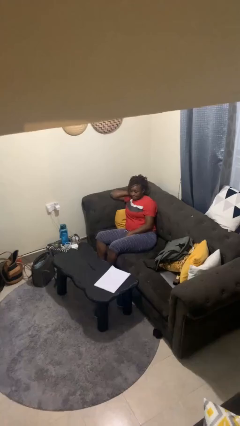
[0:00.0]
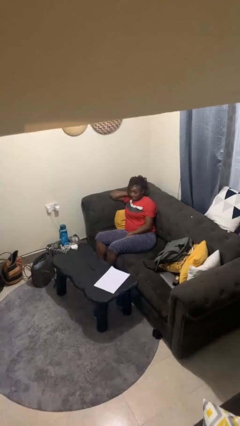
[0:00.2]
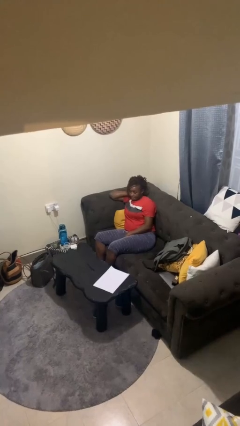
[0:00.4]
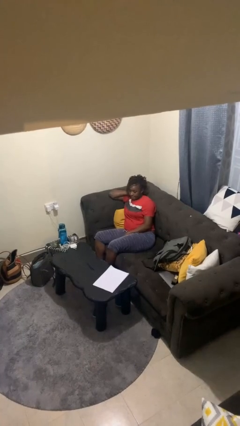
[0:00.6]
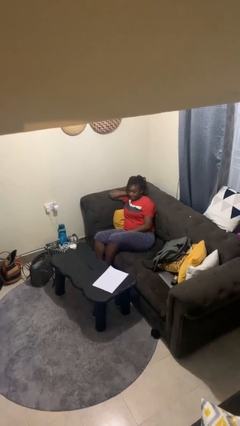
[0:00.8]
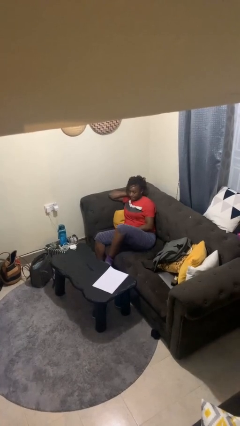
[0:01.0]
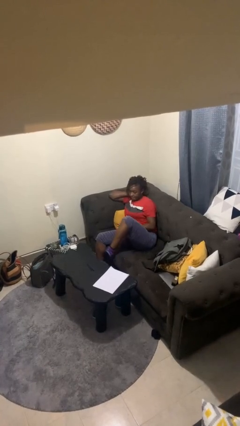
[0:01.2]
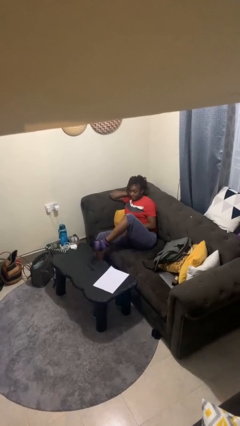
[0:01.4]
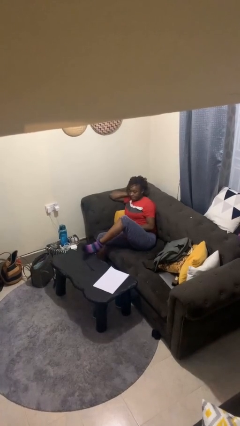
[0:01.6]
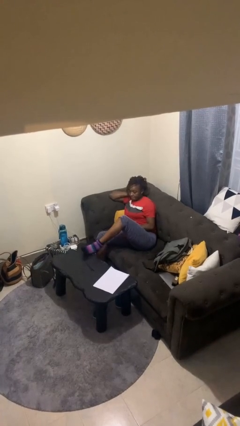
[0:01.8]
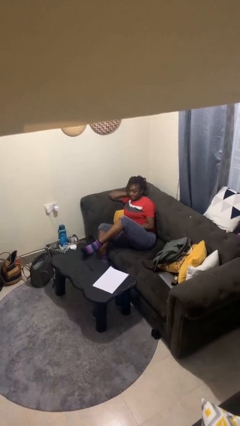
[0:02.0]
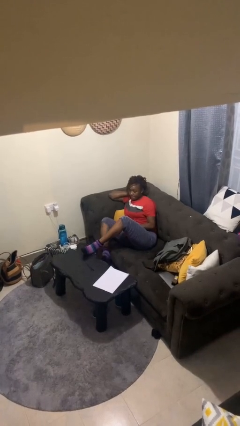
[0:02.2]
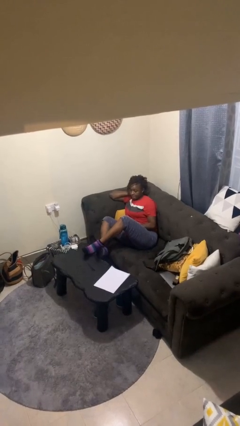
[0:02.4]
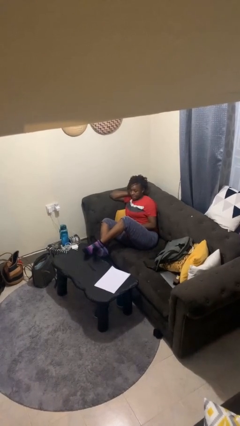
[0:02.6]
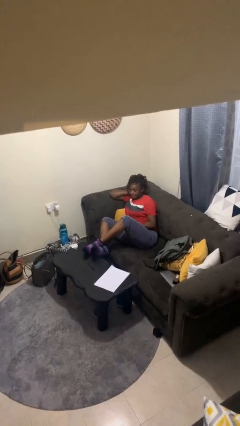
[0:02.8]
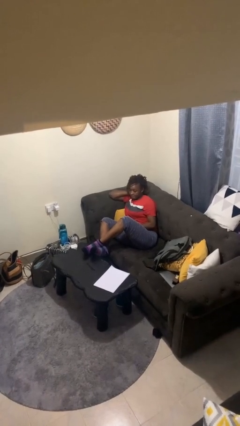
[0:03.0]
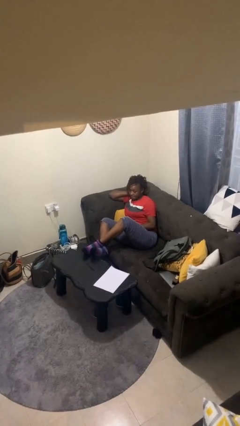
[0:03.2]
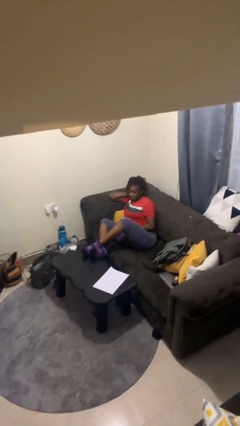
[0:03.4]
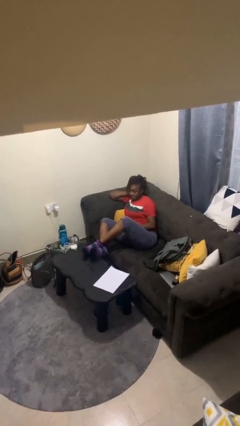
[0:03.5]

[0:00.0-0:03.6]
person puts feet up

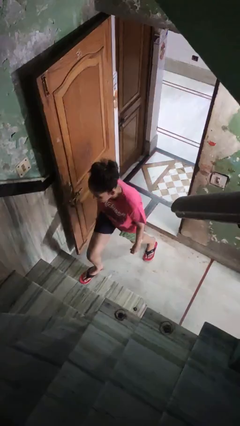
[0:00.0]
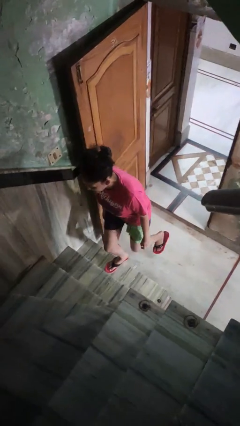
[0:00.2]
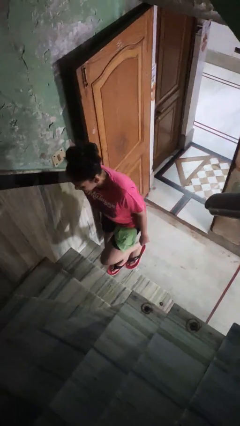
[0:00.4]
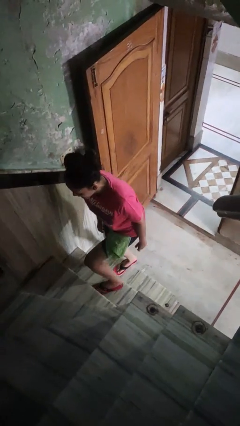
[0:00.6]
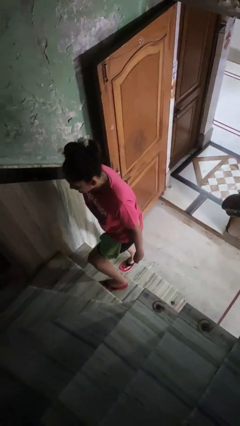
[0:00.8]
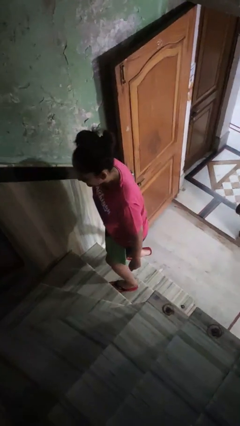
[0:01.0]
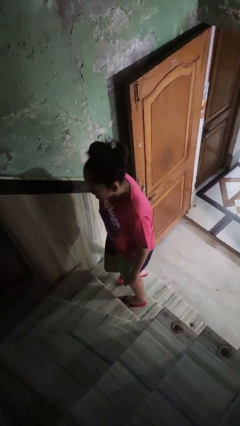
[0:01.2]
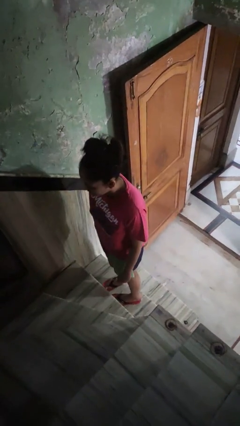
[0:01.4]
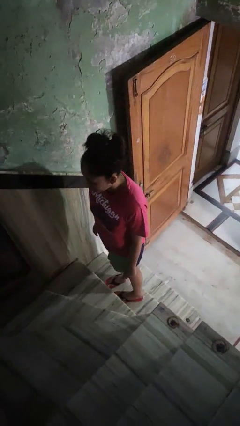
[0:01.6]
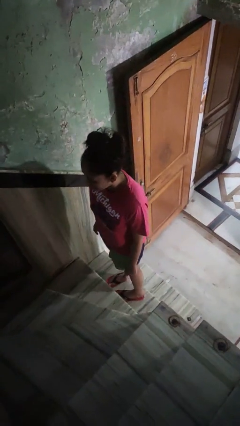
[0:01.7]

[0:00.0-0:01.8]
person climbs up stairs

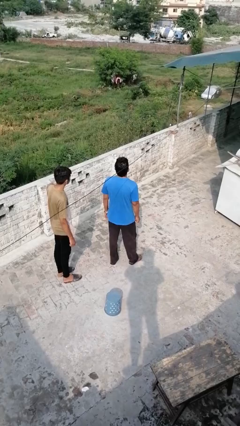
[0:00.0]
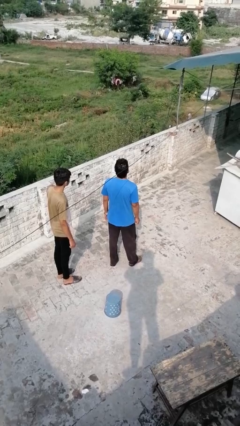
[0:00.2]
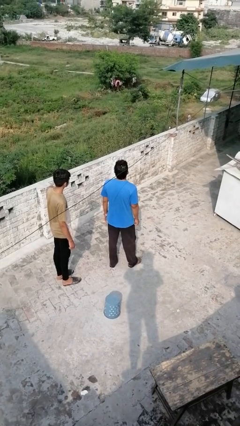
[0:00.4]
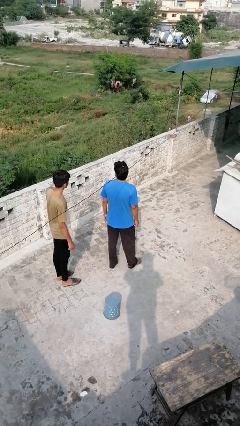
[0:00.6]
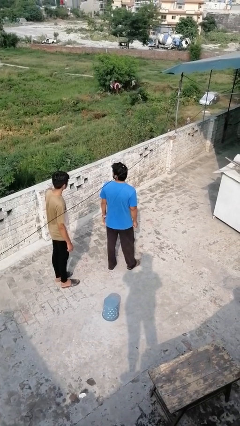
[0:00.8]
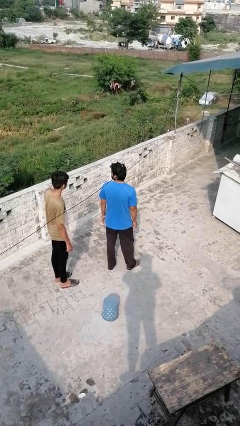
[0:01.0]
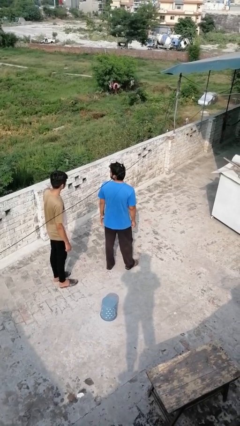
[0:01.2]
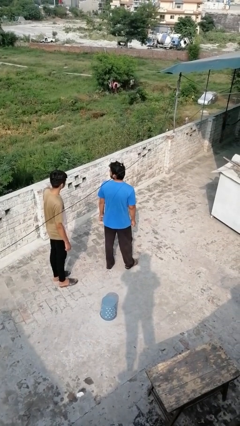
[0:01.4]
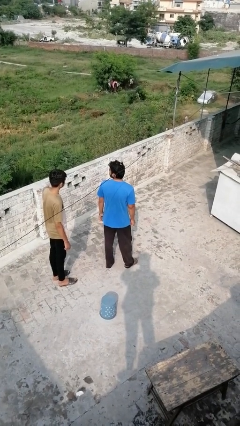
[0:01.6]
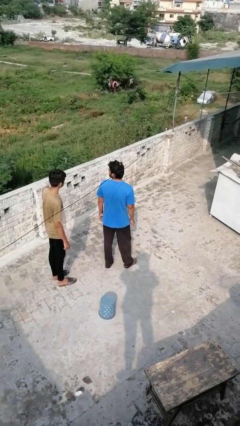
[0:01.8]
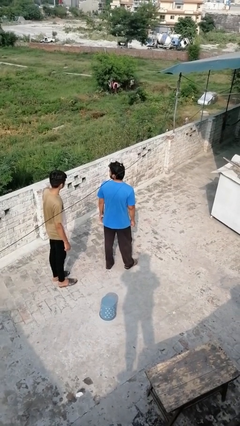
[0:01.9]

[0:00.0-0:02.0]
person looks over shoulder

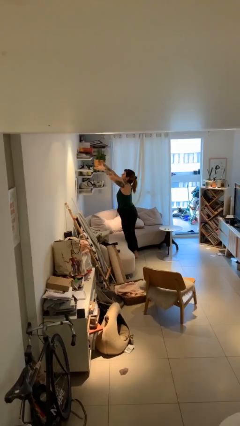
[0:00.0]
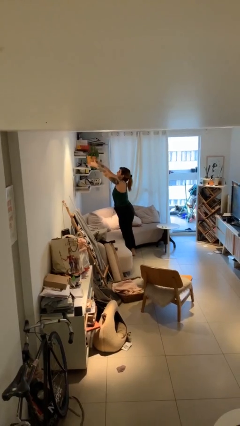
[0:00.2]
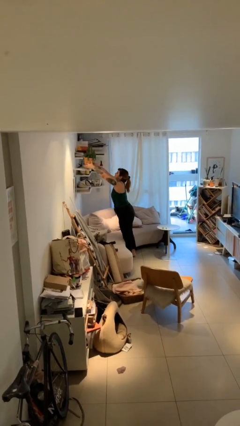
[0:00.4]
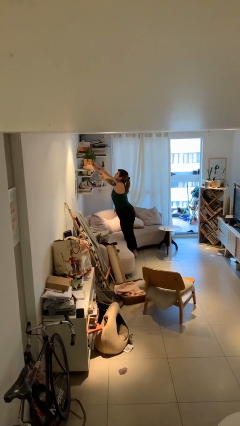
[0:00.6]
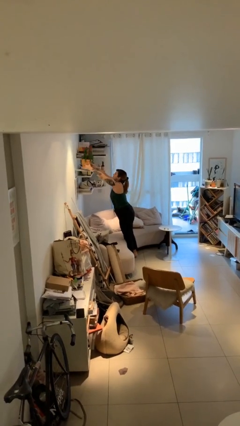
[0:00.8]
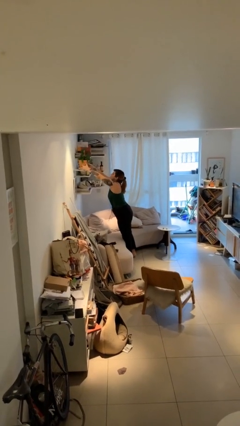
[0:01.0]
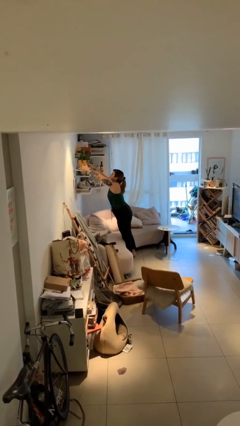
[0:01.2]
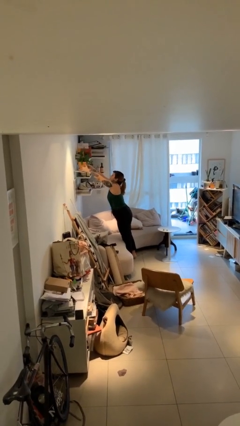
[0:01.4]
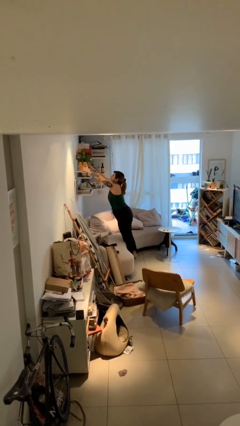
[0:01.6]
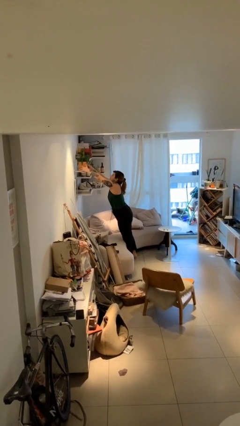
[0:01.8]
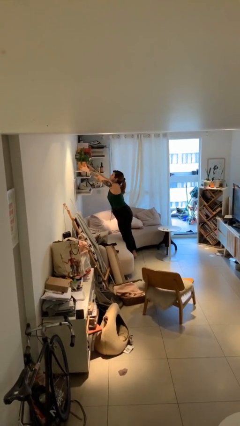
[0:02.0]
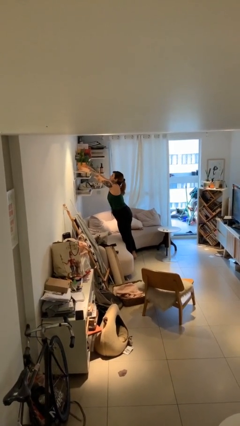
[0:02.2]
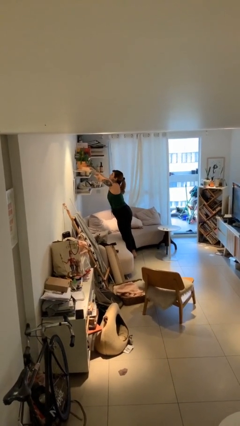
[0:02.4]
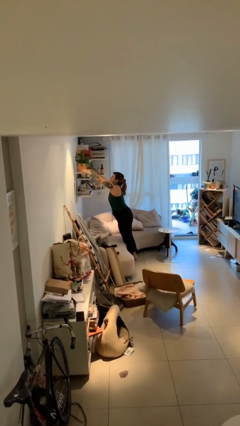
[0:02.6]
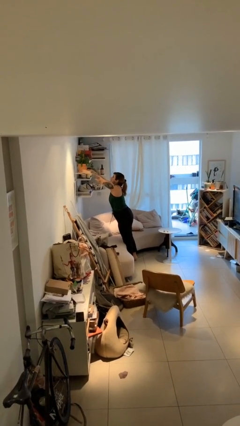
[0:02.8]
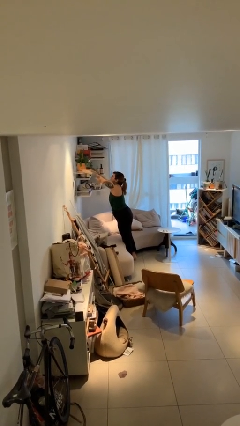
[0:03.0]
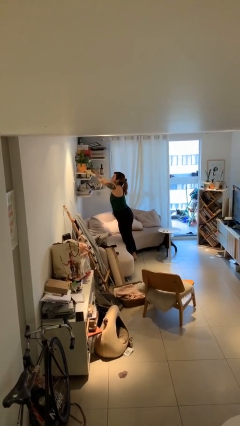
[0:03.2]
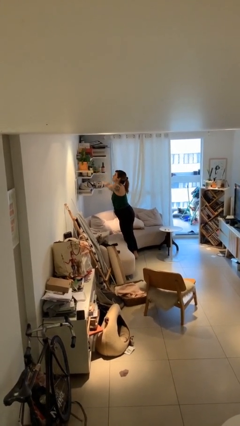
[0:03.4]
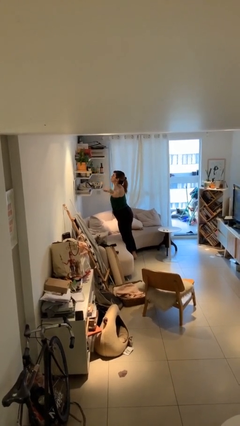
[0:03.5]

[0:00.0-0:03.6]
person puts down object on shelf

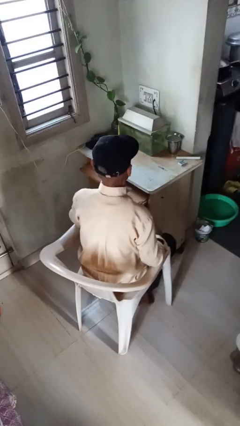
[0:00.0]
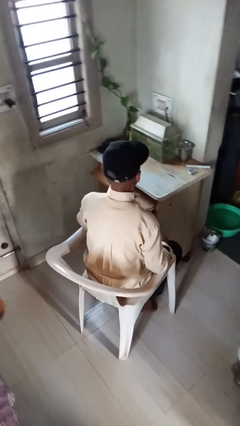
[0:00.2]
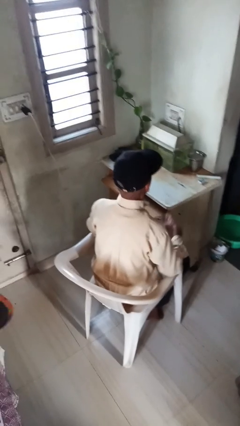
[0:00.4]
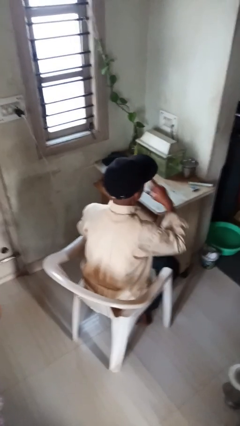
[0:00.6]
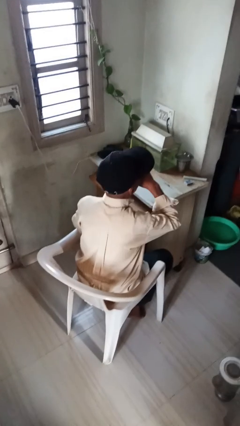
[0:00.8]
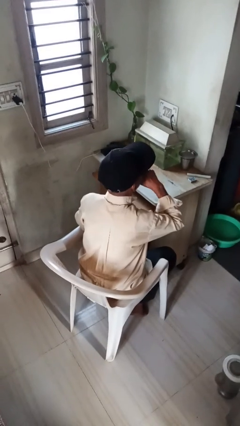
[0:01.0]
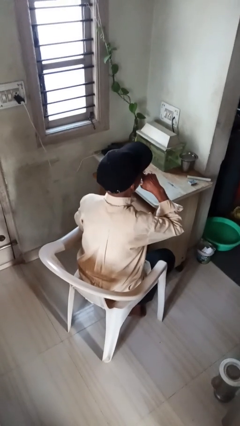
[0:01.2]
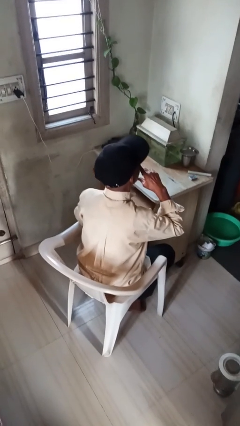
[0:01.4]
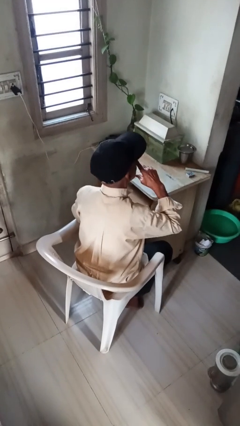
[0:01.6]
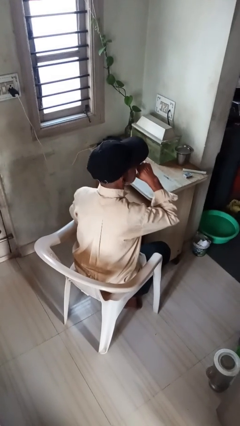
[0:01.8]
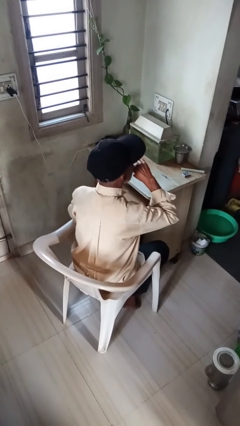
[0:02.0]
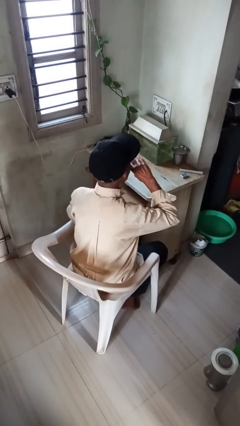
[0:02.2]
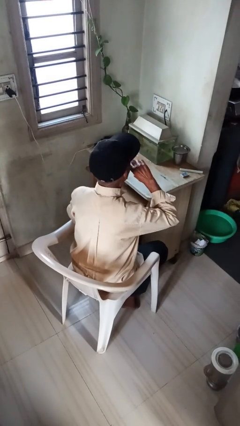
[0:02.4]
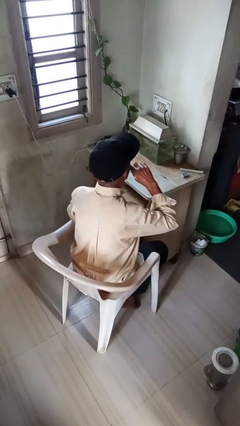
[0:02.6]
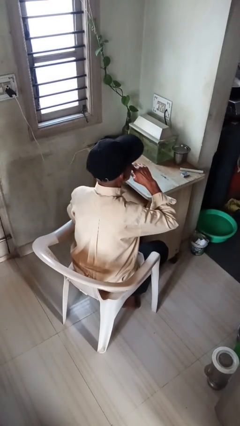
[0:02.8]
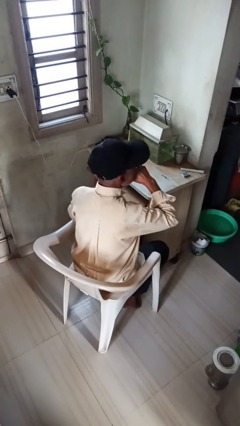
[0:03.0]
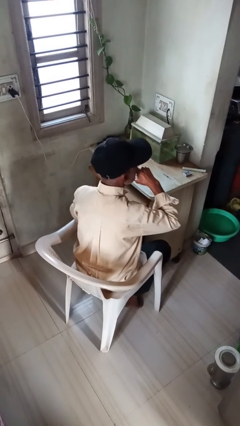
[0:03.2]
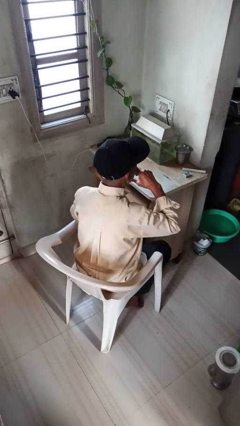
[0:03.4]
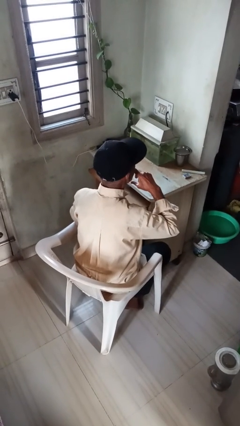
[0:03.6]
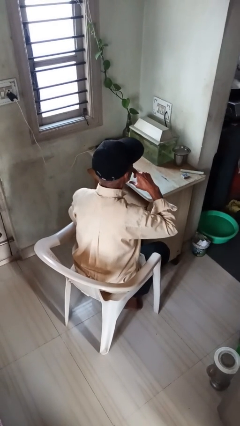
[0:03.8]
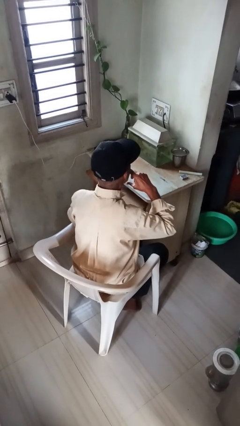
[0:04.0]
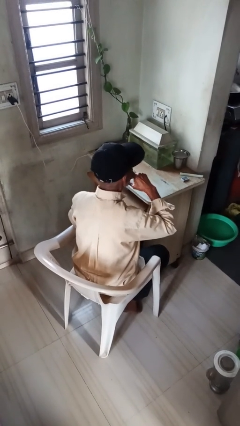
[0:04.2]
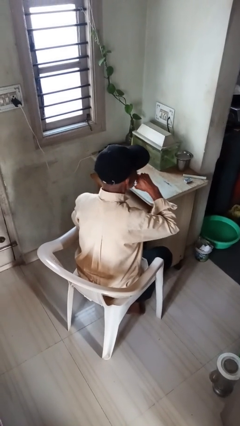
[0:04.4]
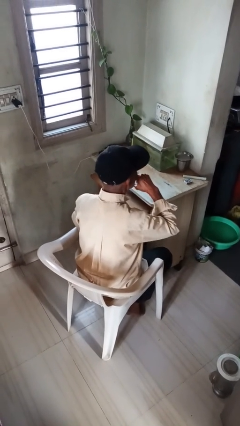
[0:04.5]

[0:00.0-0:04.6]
person licks fingers

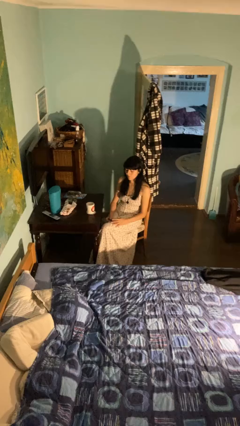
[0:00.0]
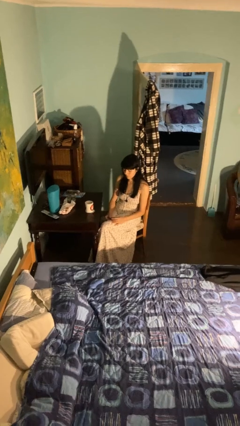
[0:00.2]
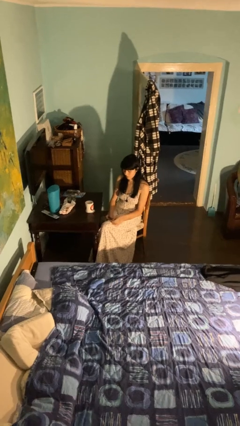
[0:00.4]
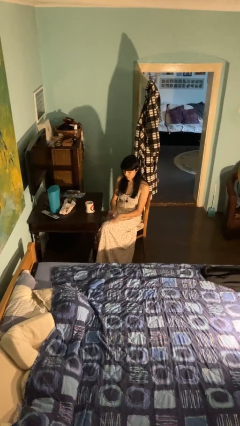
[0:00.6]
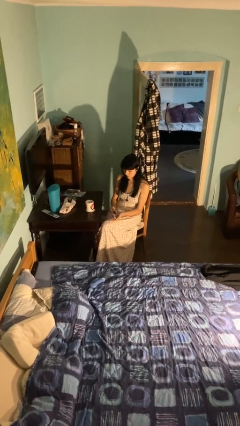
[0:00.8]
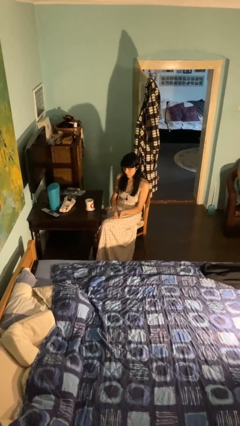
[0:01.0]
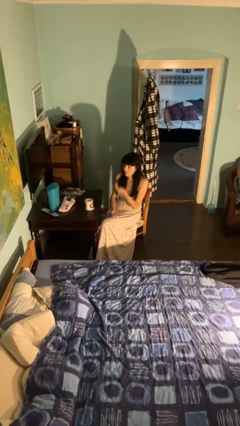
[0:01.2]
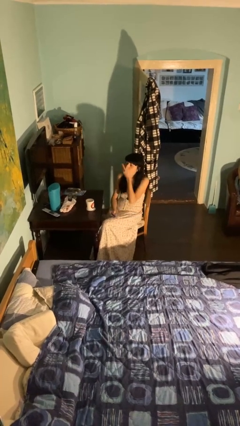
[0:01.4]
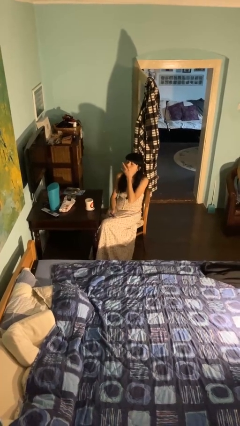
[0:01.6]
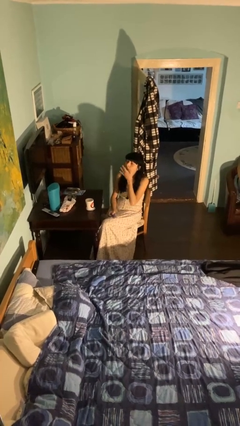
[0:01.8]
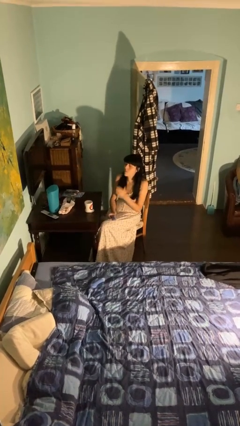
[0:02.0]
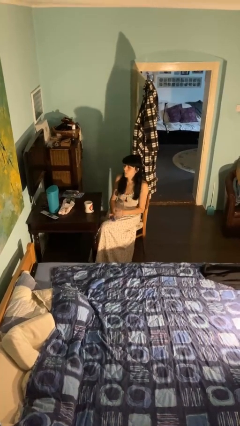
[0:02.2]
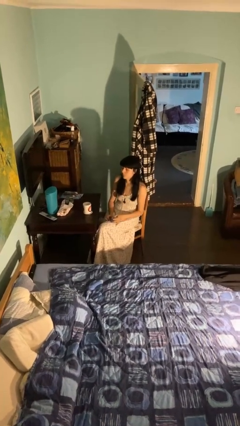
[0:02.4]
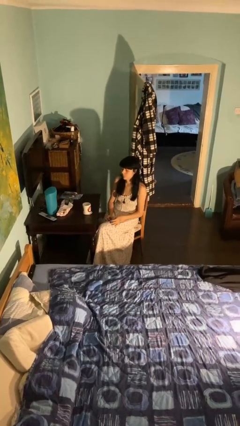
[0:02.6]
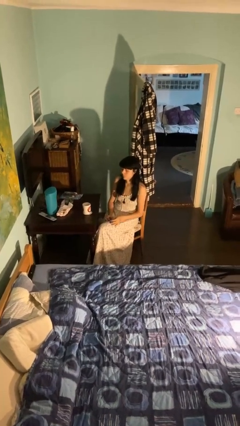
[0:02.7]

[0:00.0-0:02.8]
person takes medicine pills
